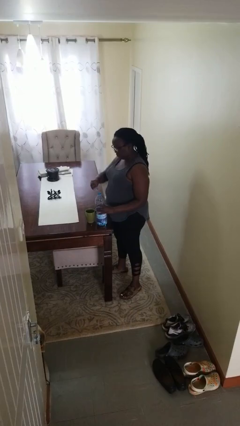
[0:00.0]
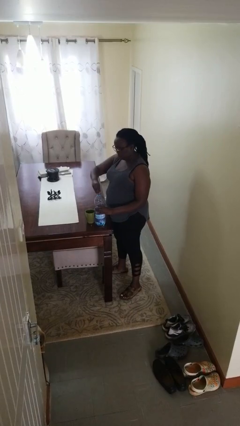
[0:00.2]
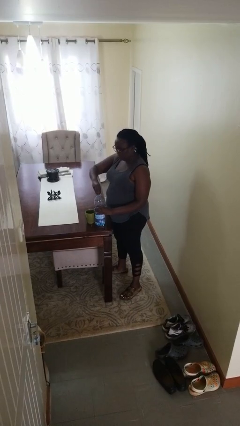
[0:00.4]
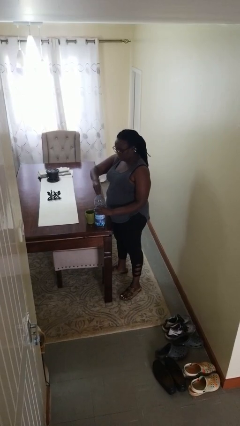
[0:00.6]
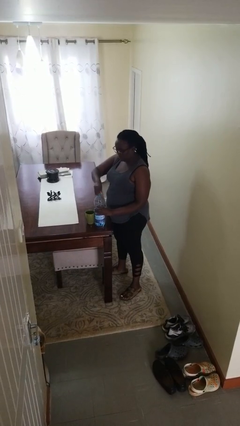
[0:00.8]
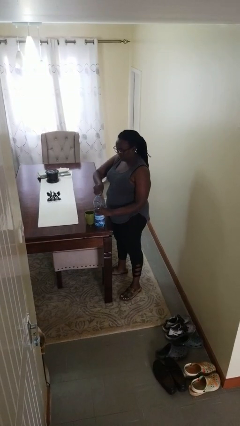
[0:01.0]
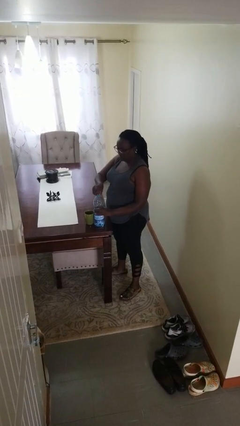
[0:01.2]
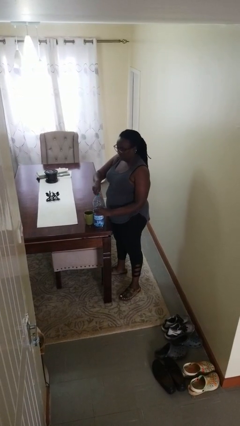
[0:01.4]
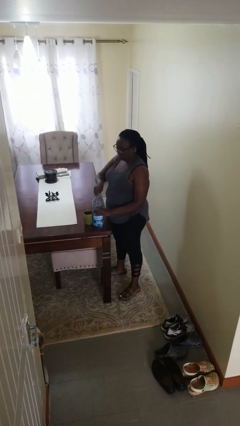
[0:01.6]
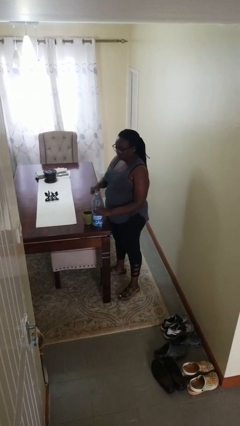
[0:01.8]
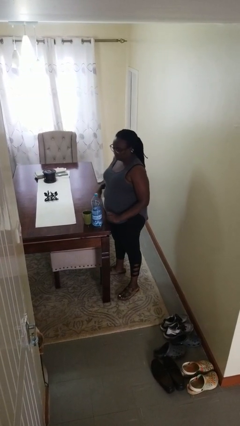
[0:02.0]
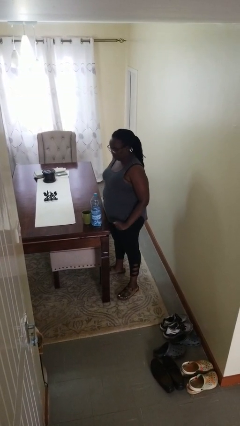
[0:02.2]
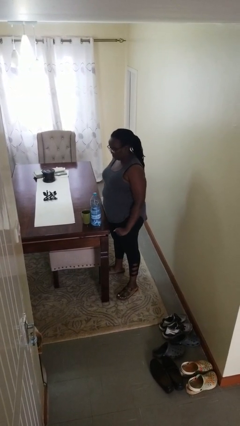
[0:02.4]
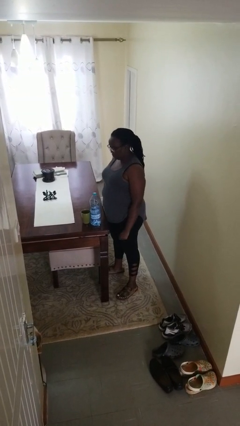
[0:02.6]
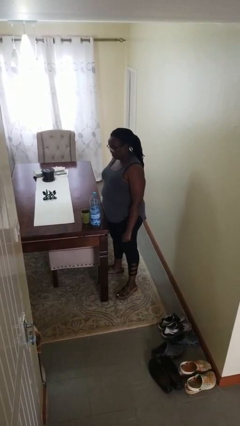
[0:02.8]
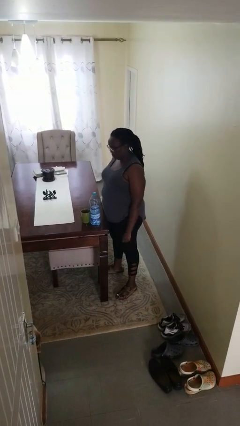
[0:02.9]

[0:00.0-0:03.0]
person screws lid to bottle

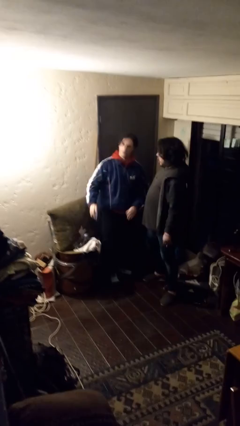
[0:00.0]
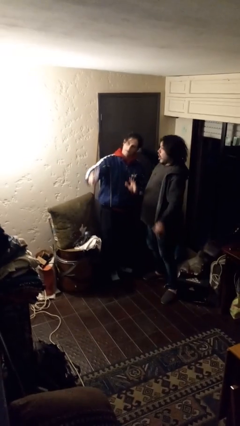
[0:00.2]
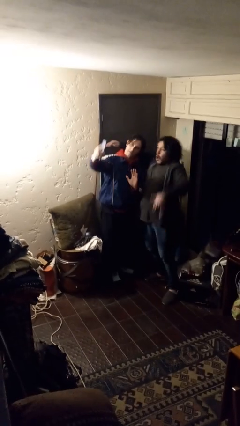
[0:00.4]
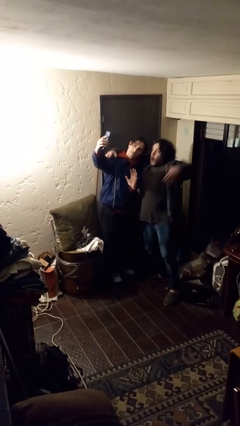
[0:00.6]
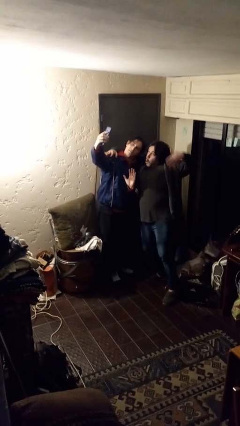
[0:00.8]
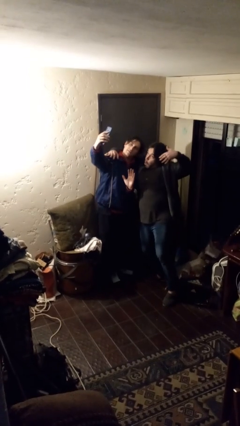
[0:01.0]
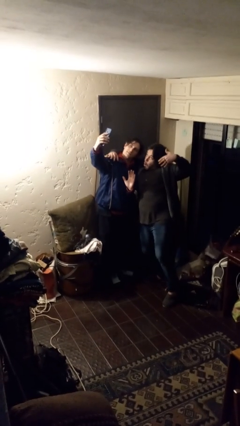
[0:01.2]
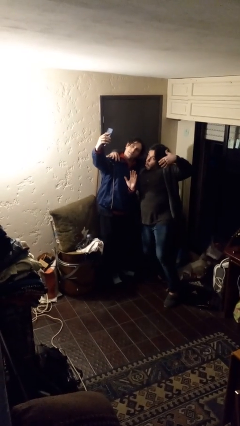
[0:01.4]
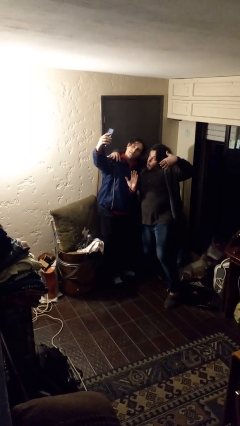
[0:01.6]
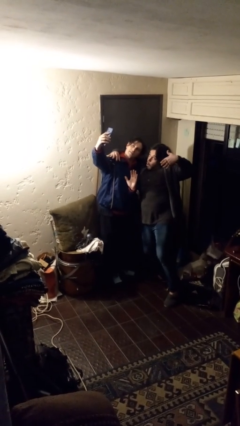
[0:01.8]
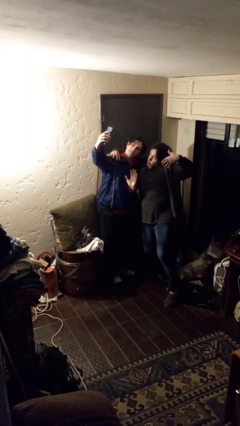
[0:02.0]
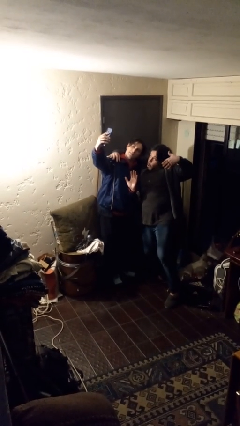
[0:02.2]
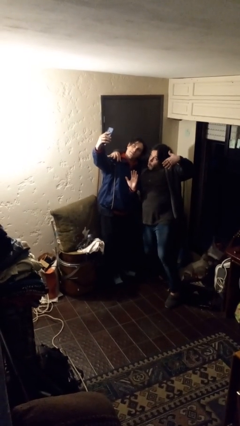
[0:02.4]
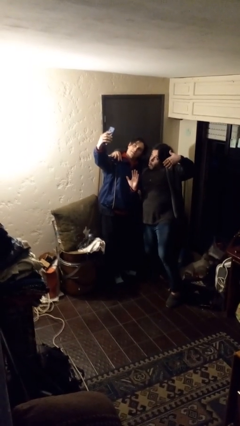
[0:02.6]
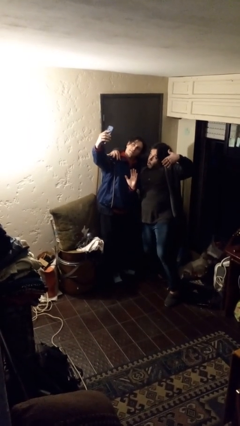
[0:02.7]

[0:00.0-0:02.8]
person takes selfie with person

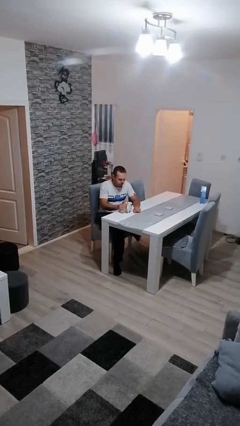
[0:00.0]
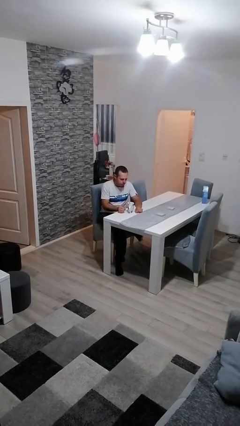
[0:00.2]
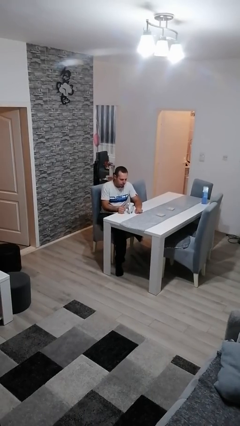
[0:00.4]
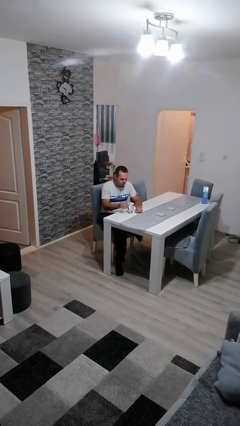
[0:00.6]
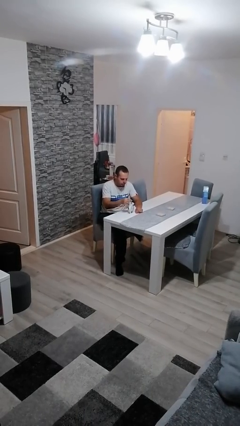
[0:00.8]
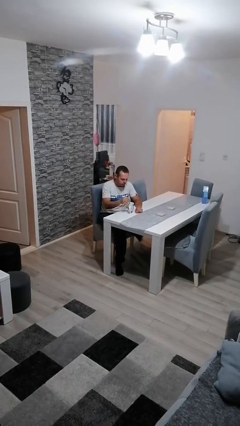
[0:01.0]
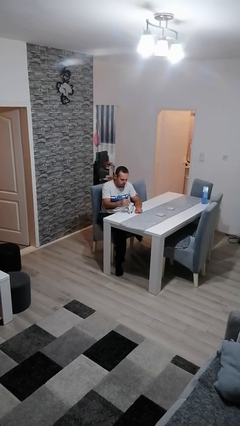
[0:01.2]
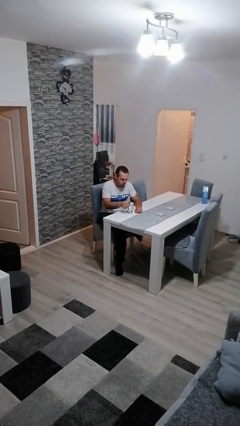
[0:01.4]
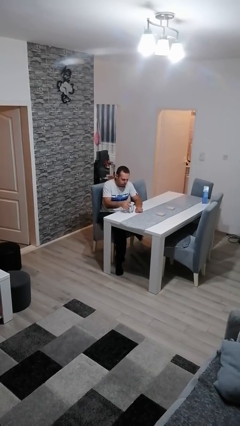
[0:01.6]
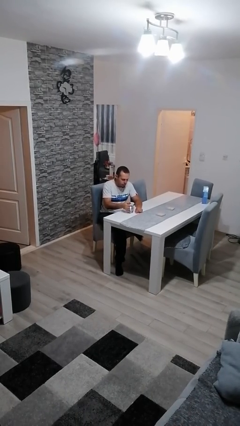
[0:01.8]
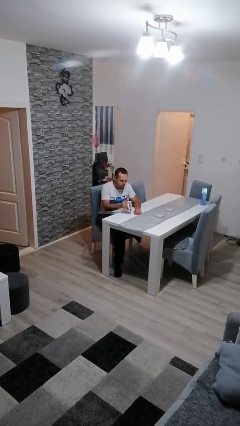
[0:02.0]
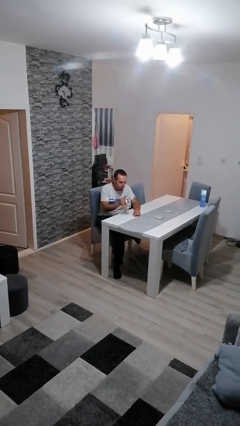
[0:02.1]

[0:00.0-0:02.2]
person stirs mug

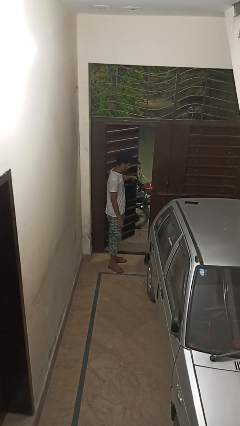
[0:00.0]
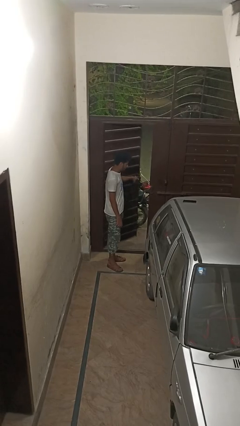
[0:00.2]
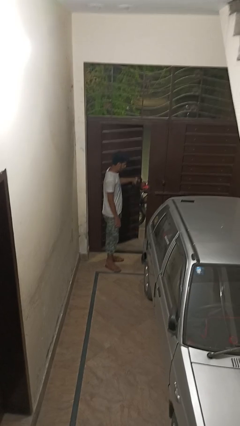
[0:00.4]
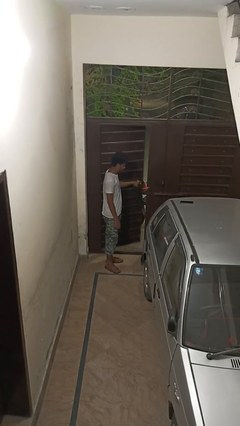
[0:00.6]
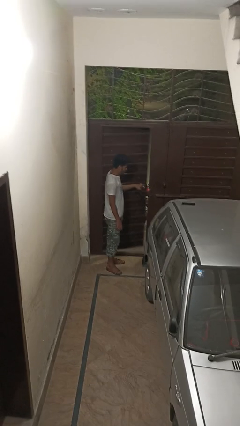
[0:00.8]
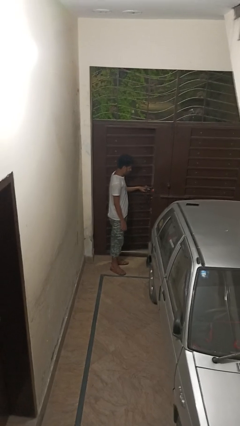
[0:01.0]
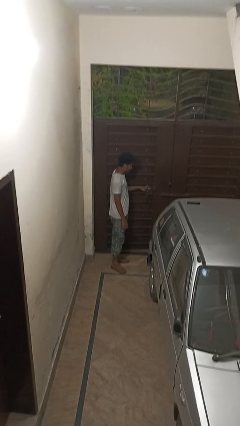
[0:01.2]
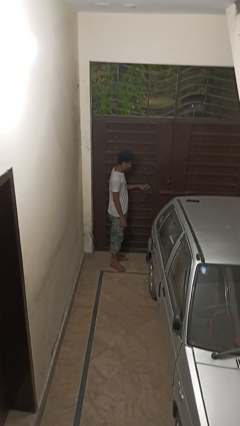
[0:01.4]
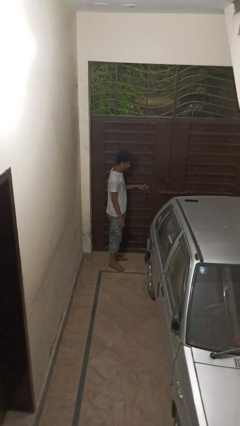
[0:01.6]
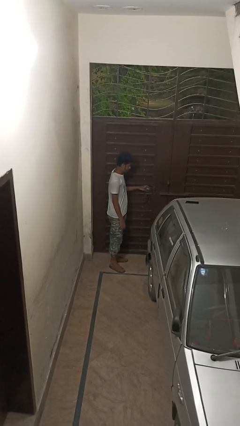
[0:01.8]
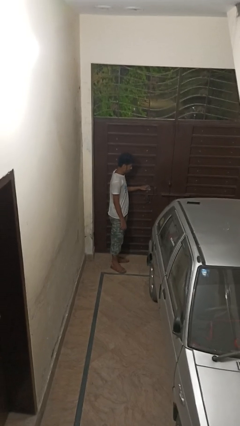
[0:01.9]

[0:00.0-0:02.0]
person closes gate

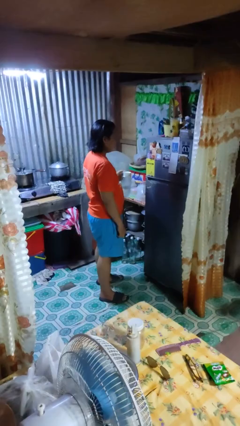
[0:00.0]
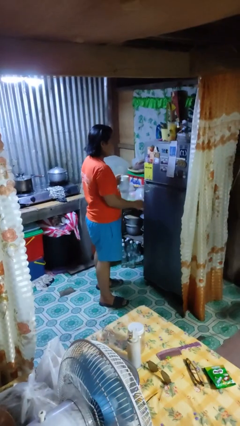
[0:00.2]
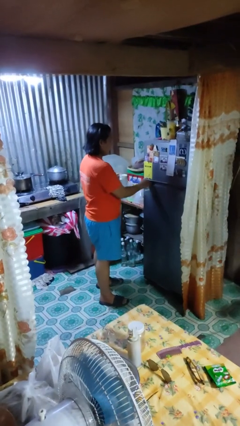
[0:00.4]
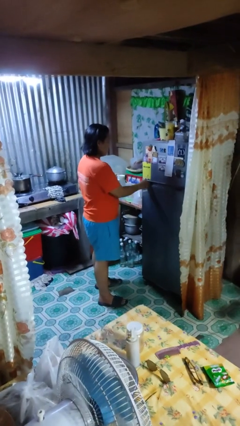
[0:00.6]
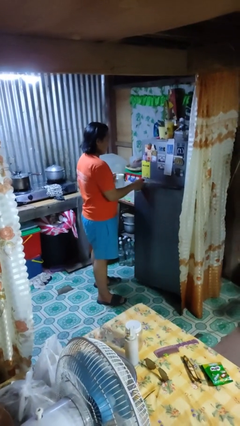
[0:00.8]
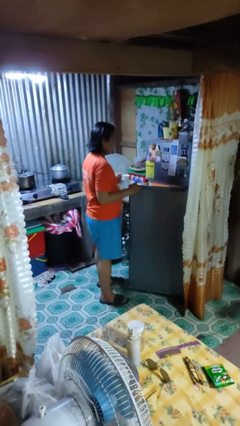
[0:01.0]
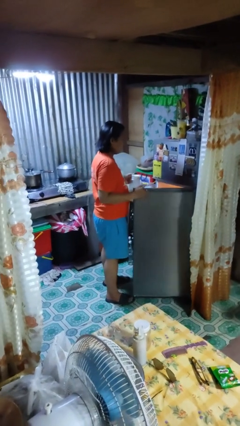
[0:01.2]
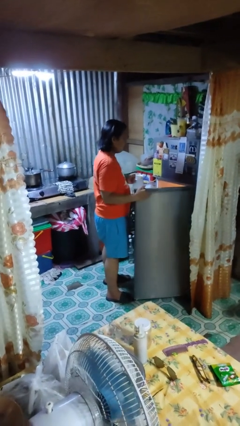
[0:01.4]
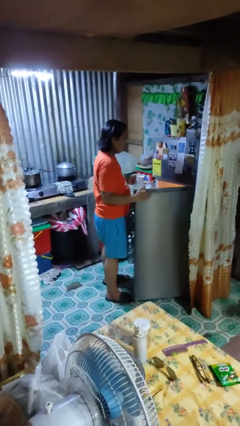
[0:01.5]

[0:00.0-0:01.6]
person opens refrigerator

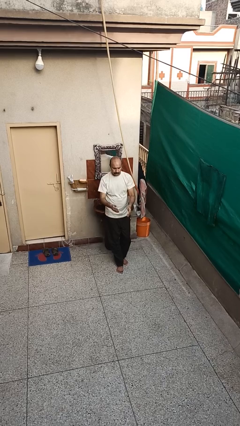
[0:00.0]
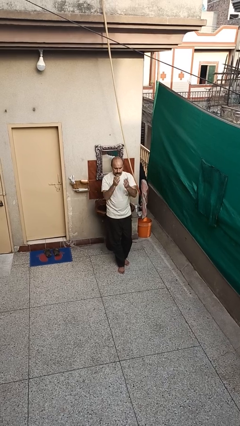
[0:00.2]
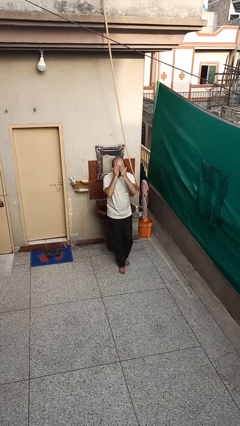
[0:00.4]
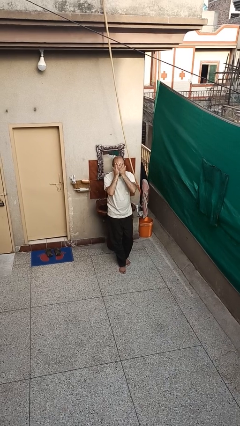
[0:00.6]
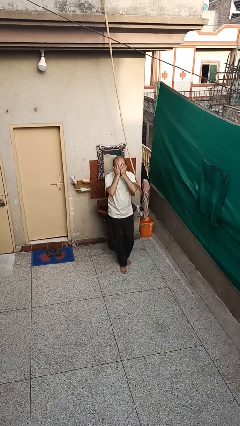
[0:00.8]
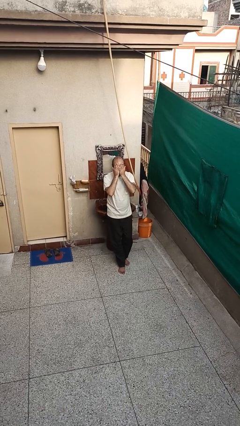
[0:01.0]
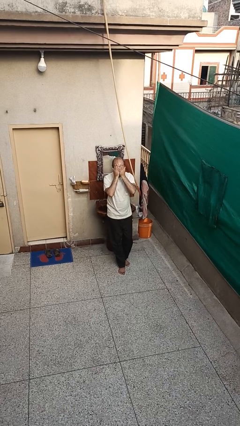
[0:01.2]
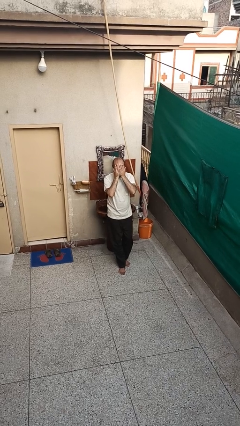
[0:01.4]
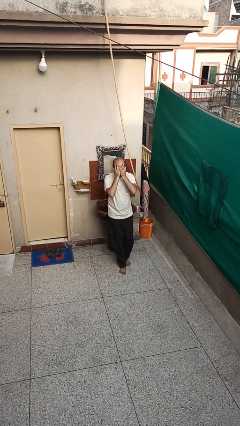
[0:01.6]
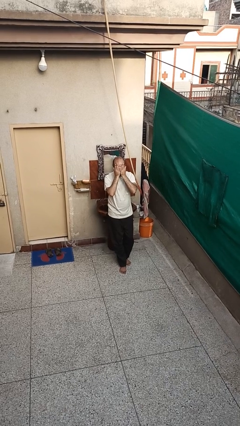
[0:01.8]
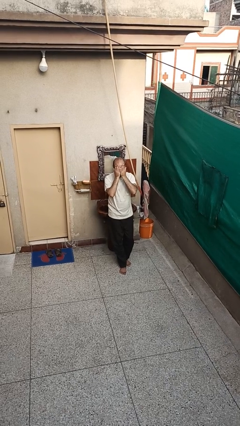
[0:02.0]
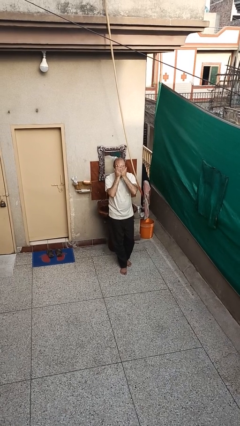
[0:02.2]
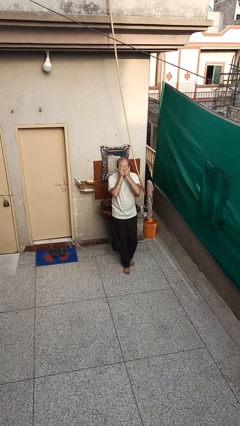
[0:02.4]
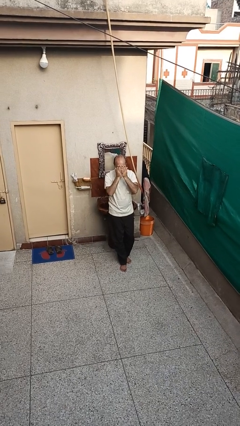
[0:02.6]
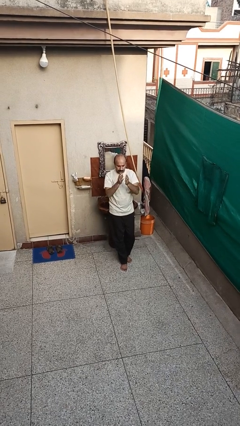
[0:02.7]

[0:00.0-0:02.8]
person covers face with hands

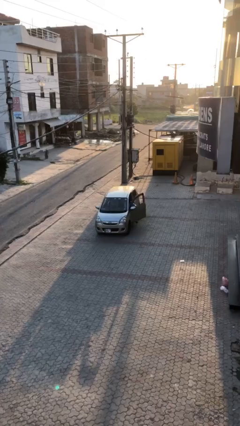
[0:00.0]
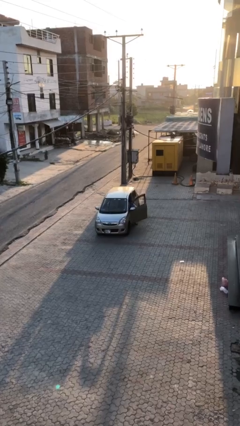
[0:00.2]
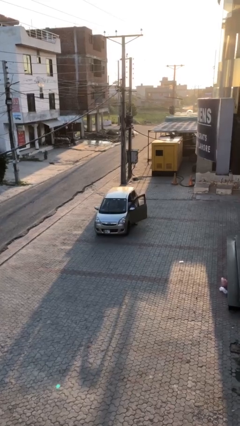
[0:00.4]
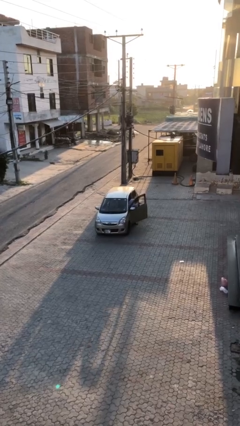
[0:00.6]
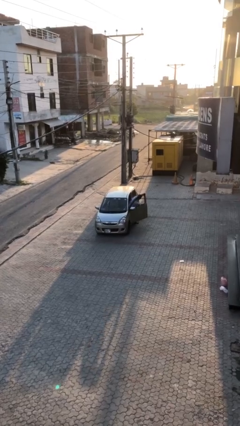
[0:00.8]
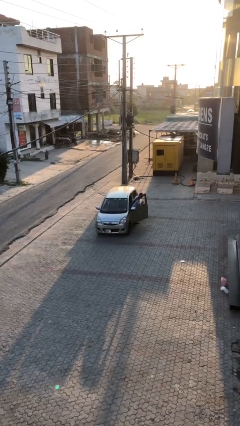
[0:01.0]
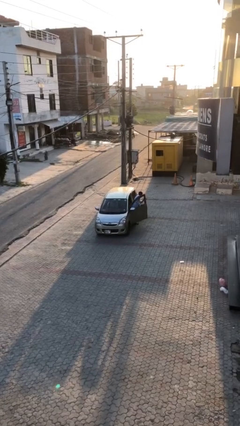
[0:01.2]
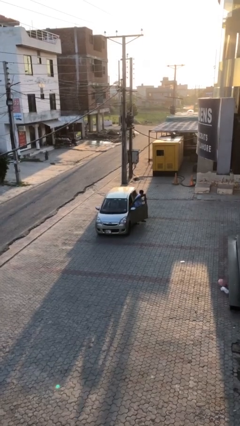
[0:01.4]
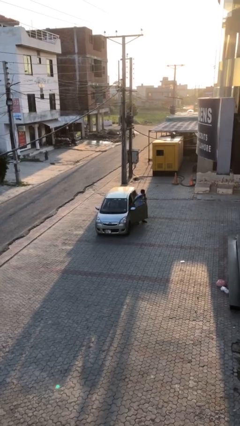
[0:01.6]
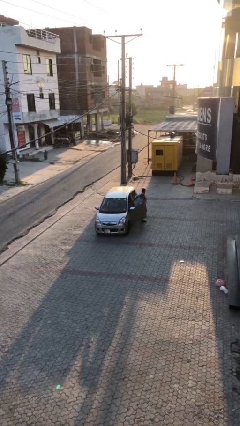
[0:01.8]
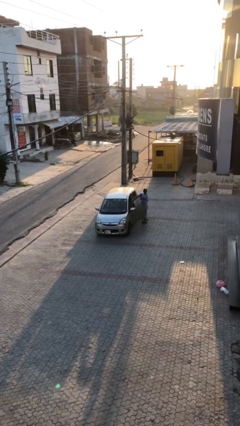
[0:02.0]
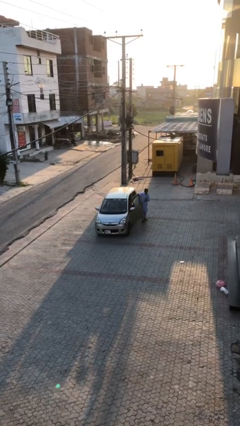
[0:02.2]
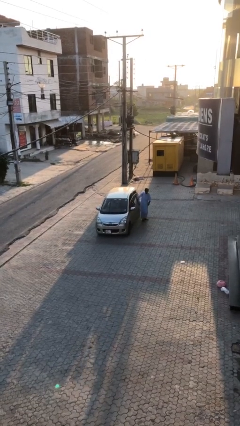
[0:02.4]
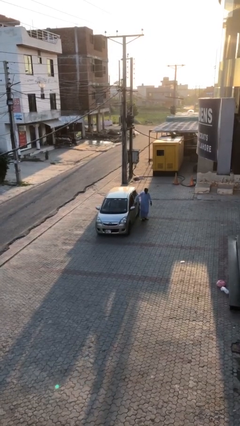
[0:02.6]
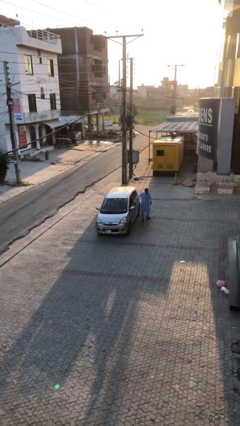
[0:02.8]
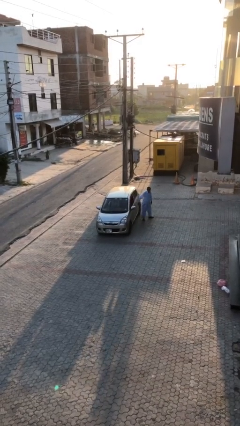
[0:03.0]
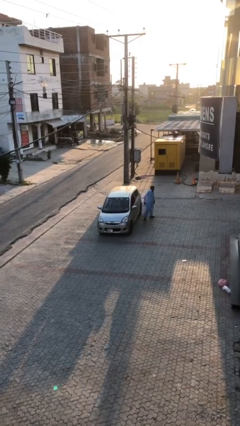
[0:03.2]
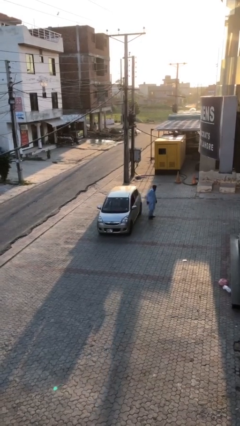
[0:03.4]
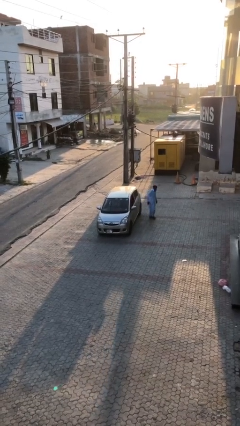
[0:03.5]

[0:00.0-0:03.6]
car drops off person
